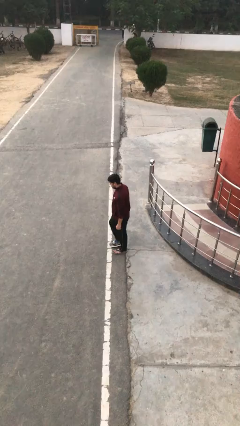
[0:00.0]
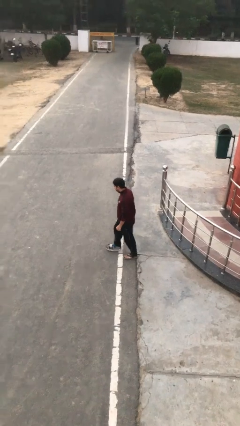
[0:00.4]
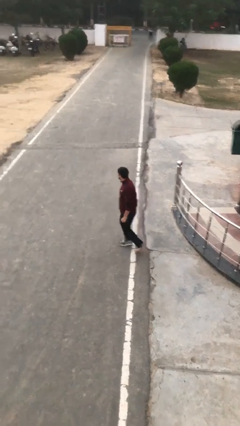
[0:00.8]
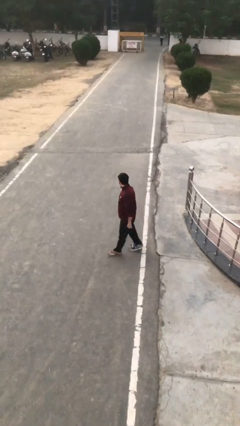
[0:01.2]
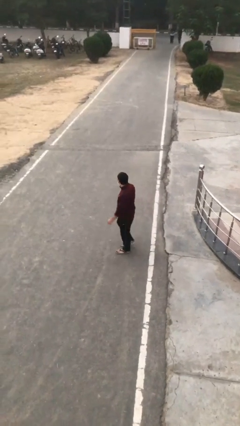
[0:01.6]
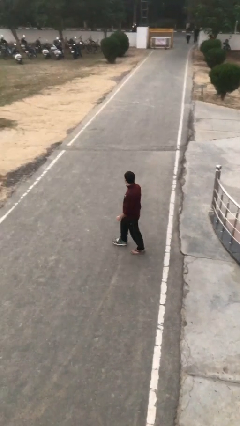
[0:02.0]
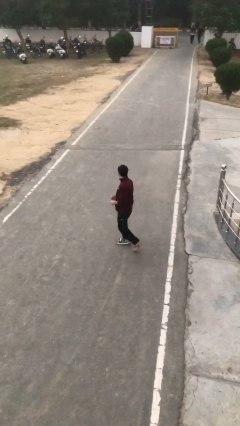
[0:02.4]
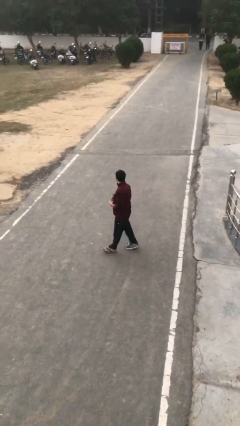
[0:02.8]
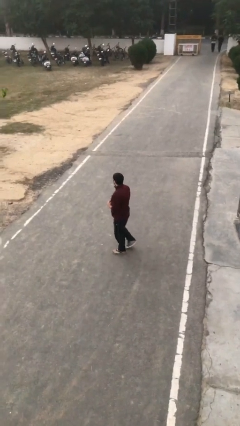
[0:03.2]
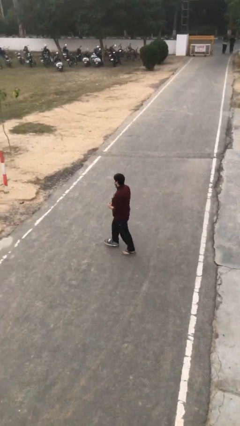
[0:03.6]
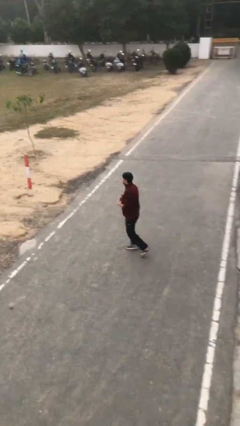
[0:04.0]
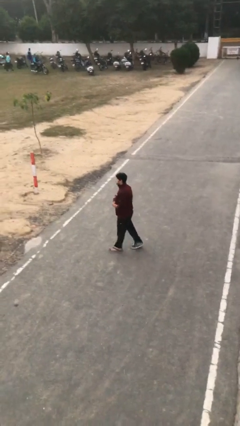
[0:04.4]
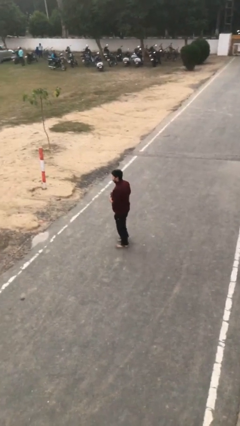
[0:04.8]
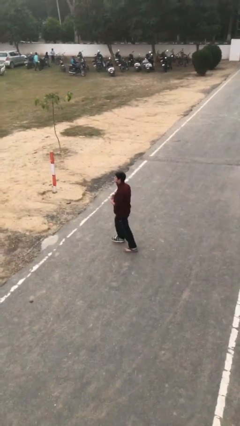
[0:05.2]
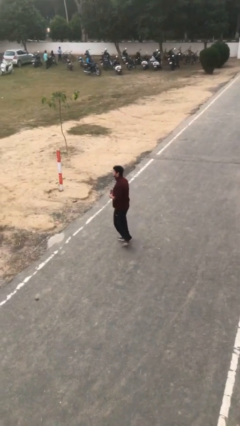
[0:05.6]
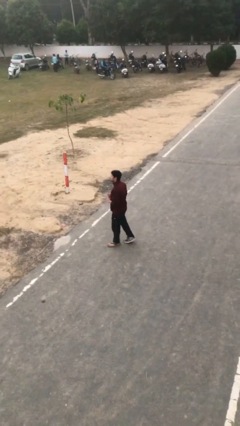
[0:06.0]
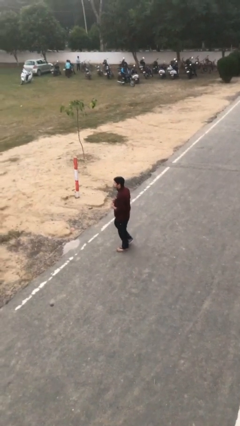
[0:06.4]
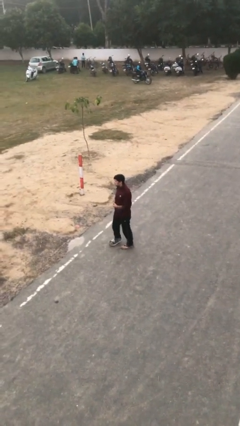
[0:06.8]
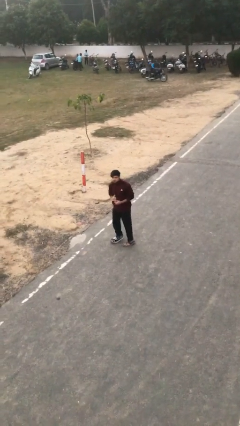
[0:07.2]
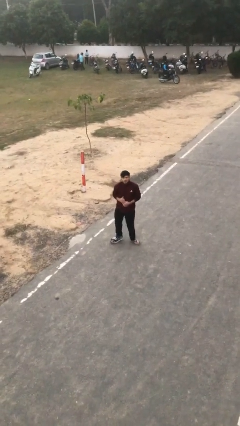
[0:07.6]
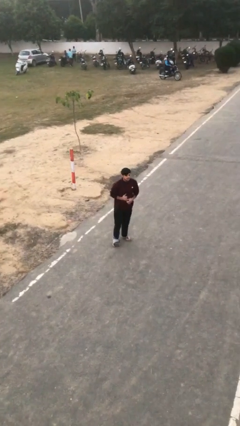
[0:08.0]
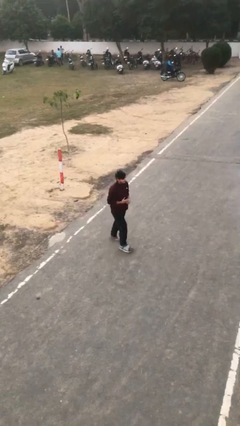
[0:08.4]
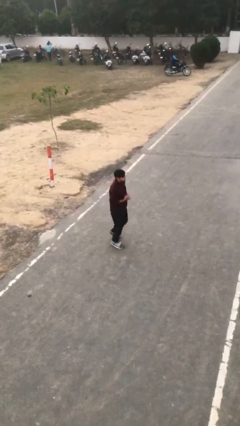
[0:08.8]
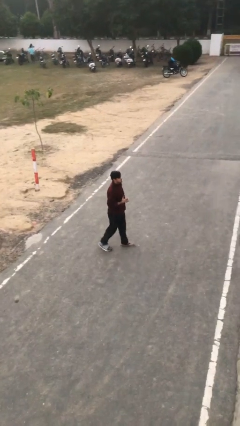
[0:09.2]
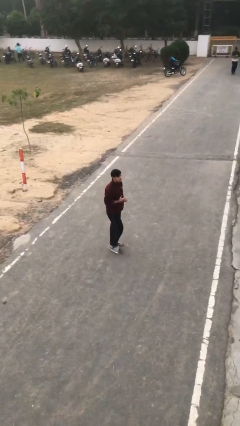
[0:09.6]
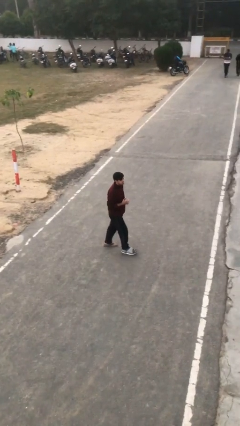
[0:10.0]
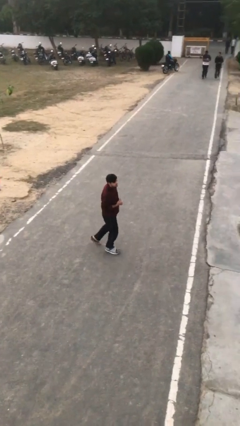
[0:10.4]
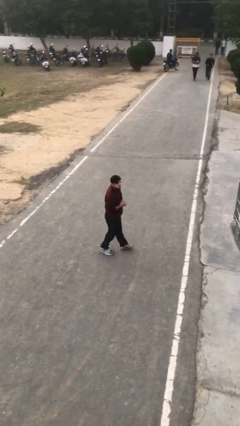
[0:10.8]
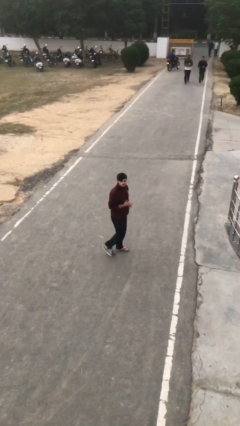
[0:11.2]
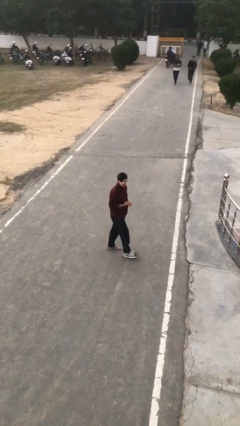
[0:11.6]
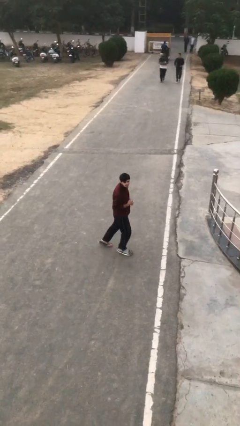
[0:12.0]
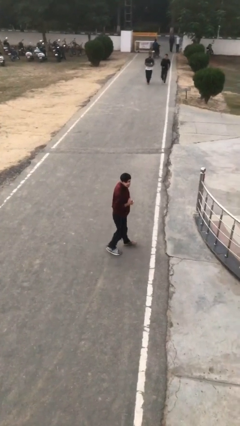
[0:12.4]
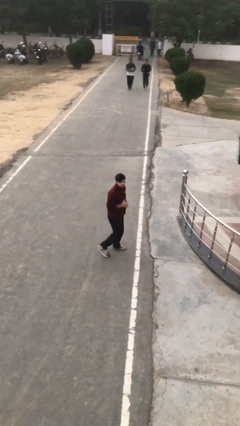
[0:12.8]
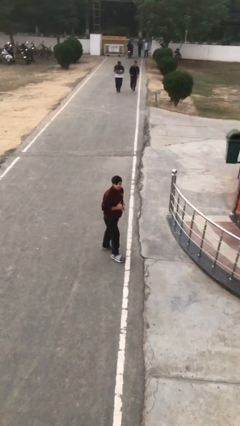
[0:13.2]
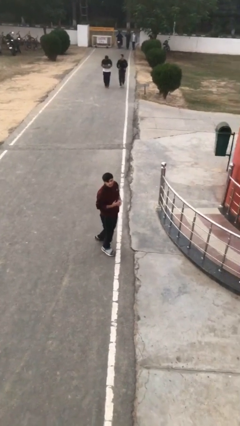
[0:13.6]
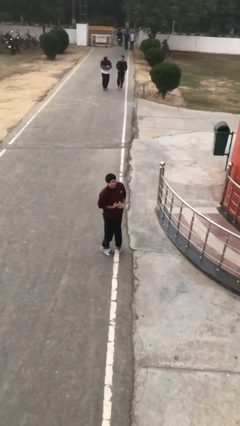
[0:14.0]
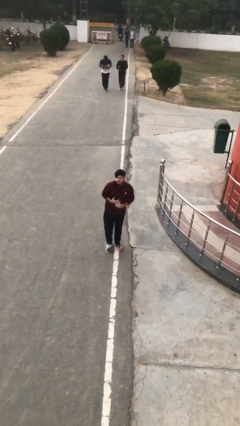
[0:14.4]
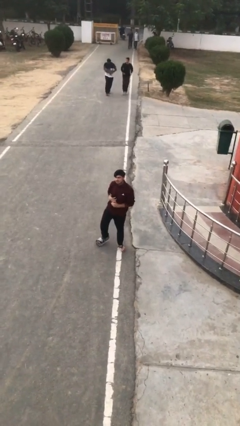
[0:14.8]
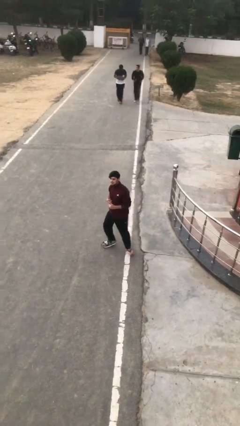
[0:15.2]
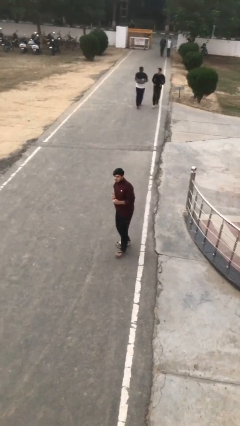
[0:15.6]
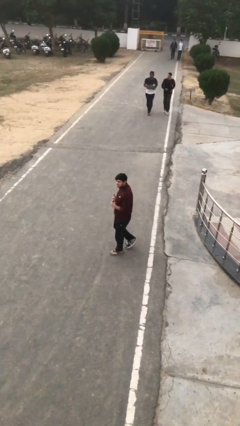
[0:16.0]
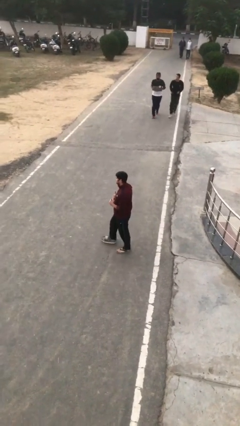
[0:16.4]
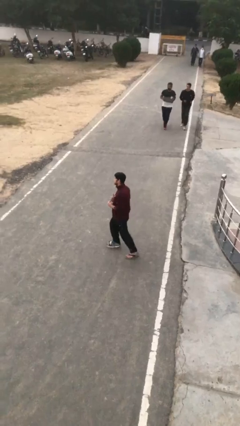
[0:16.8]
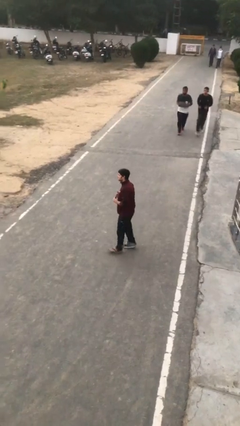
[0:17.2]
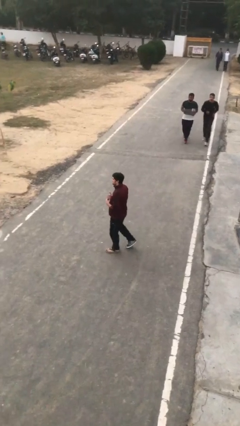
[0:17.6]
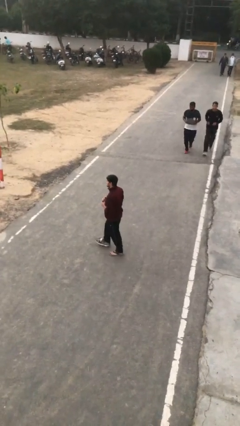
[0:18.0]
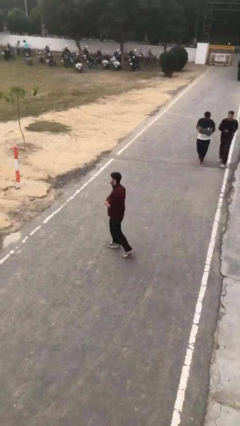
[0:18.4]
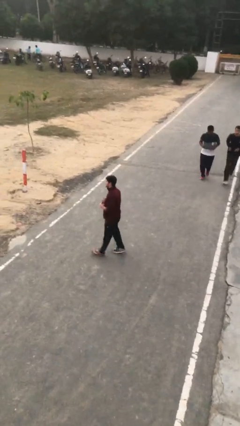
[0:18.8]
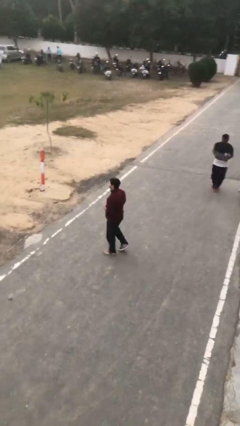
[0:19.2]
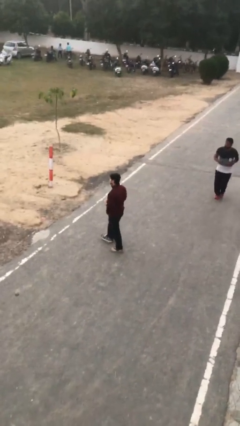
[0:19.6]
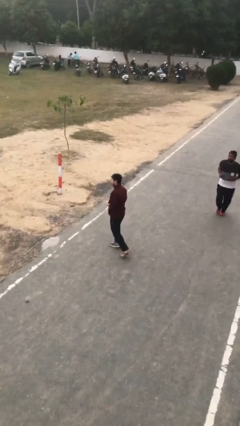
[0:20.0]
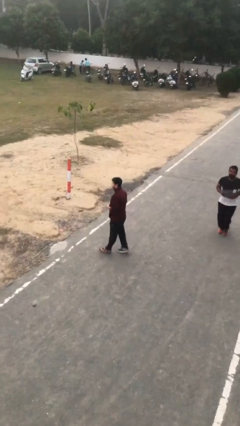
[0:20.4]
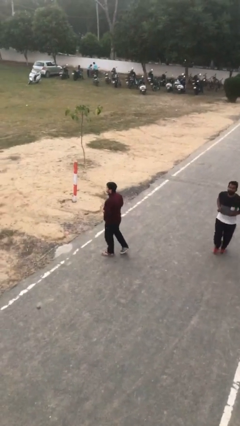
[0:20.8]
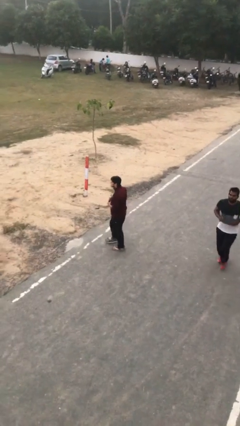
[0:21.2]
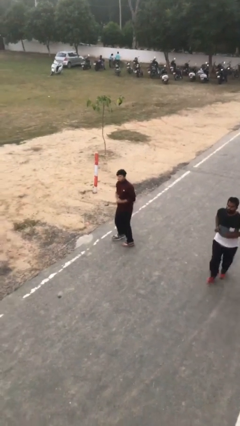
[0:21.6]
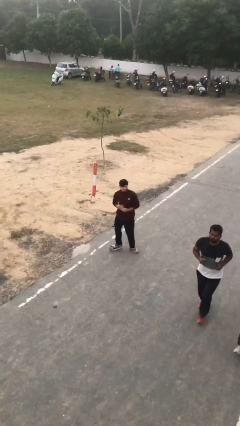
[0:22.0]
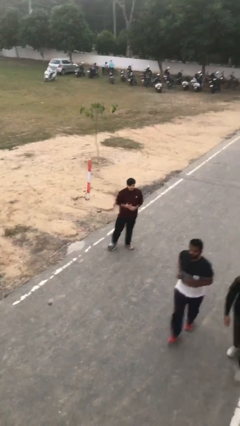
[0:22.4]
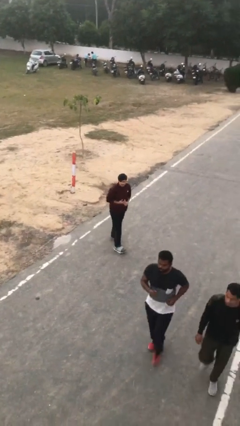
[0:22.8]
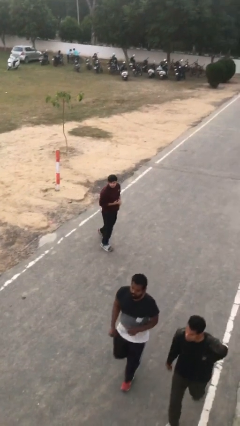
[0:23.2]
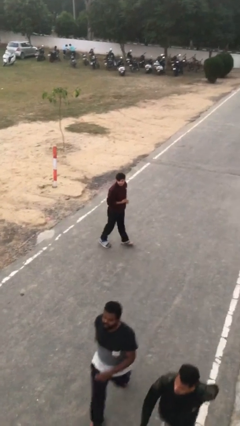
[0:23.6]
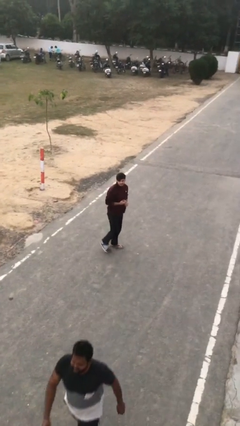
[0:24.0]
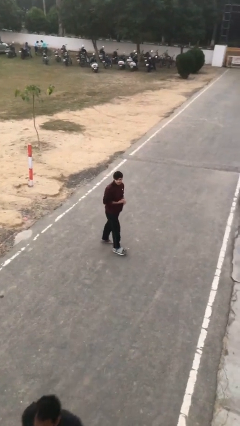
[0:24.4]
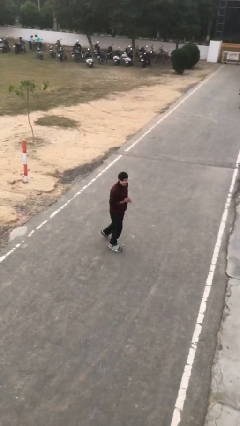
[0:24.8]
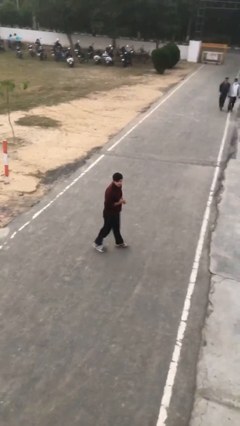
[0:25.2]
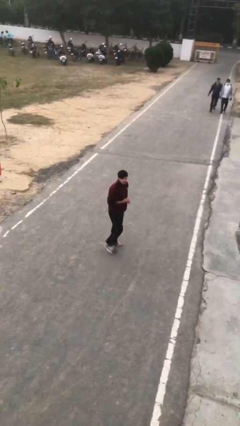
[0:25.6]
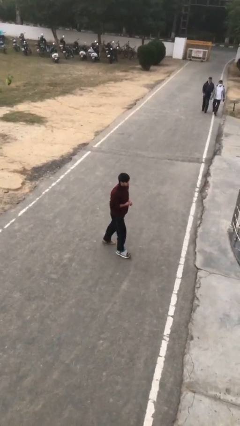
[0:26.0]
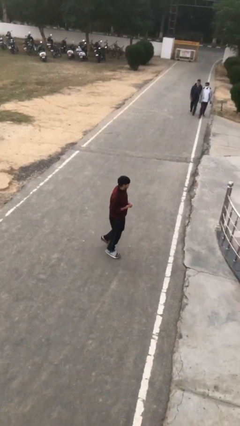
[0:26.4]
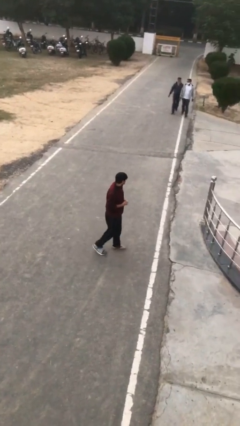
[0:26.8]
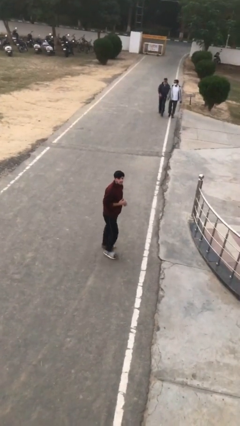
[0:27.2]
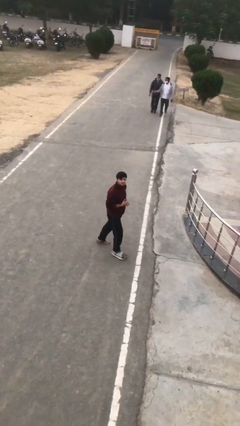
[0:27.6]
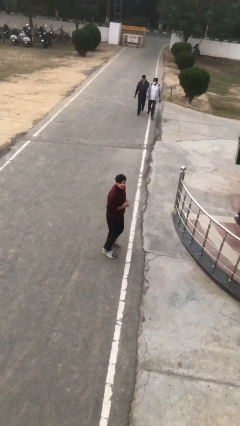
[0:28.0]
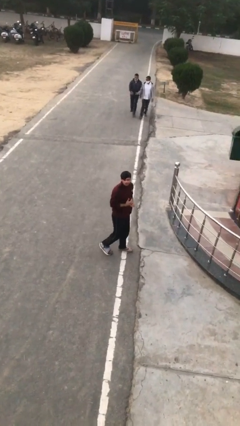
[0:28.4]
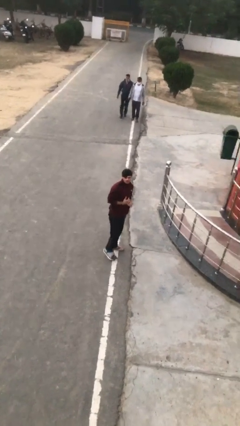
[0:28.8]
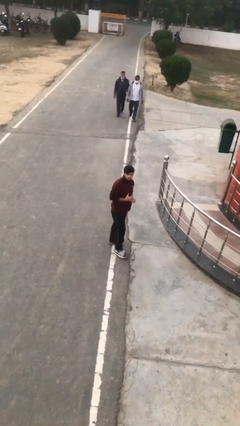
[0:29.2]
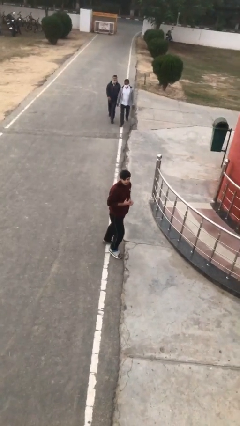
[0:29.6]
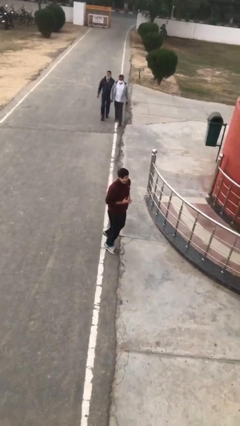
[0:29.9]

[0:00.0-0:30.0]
person walks

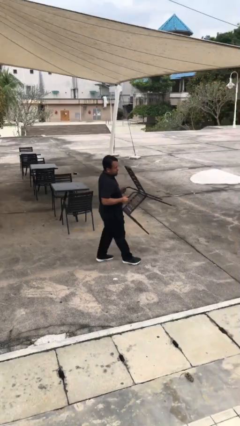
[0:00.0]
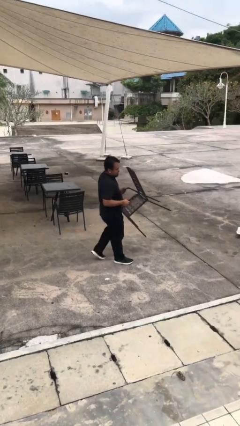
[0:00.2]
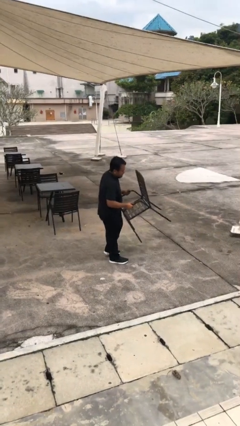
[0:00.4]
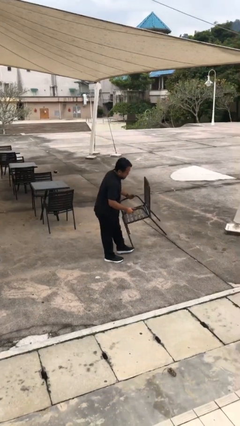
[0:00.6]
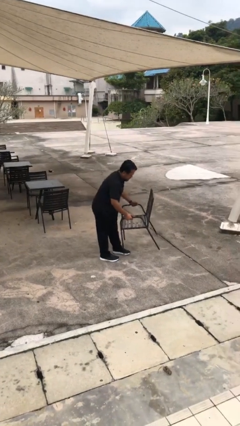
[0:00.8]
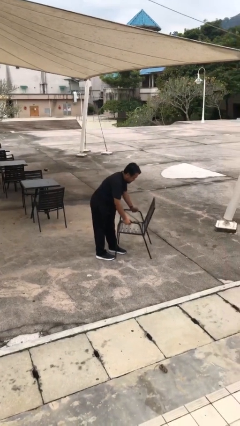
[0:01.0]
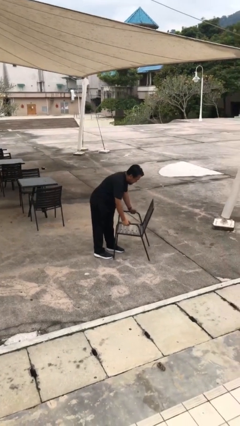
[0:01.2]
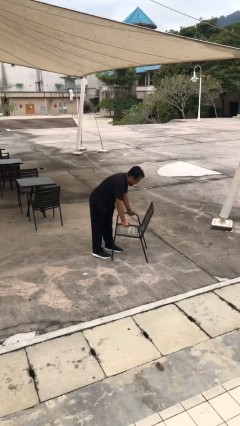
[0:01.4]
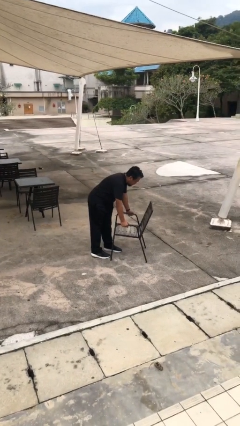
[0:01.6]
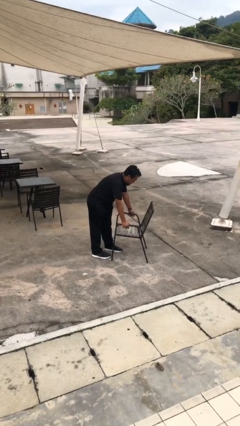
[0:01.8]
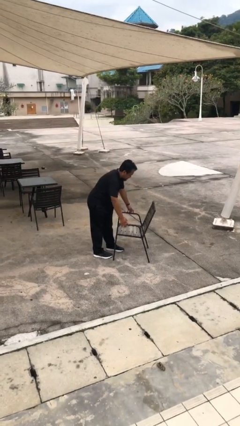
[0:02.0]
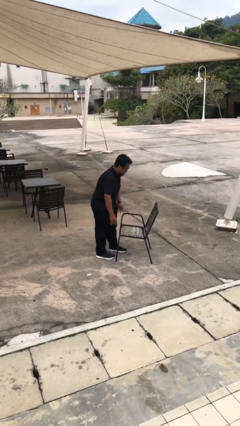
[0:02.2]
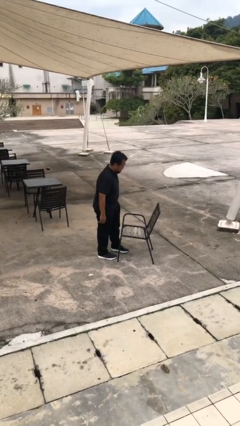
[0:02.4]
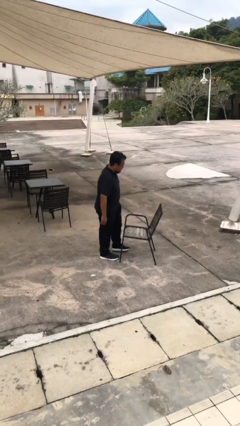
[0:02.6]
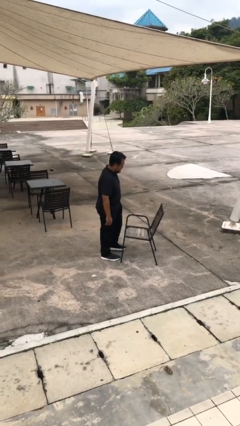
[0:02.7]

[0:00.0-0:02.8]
person puts down object on floor

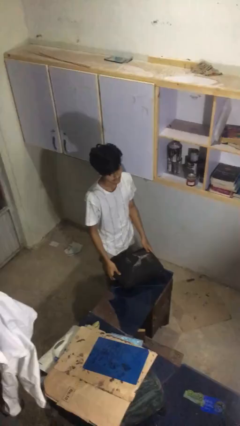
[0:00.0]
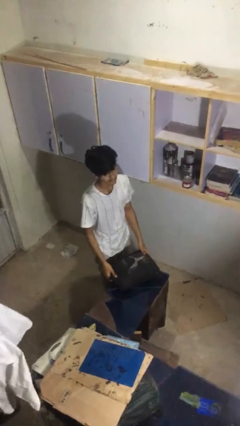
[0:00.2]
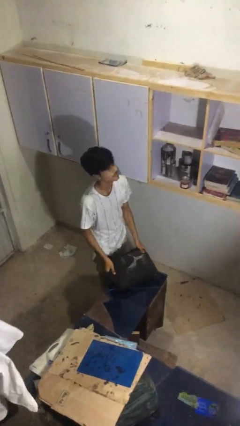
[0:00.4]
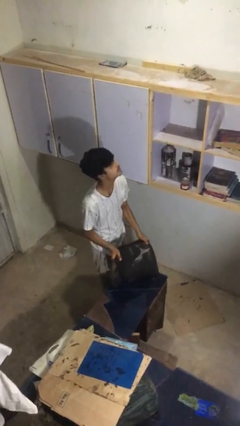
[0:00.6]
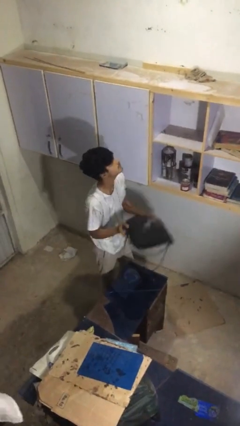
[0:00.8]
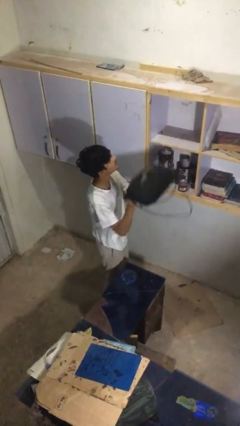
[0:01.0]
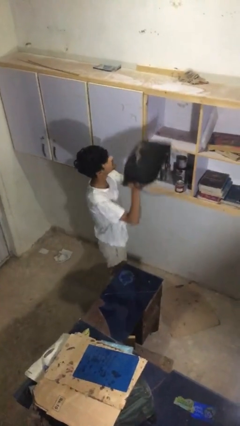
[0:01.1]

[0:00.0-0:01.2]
person picks up object from table
